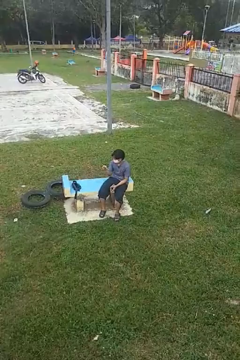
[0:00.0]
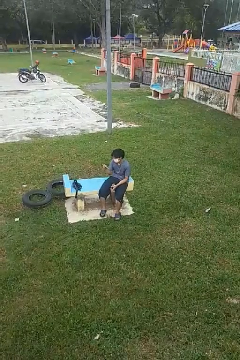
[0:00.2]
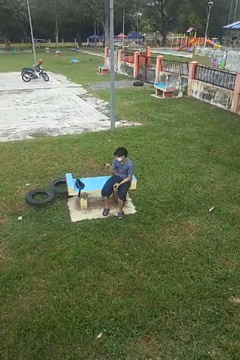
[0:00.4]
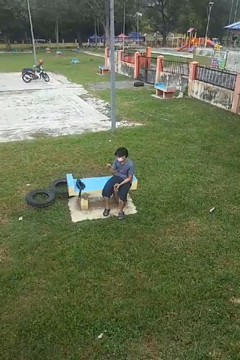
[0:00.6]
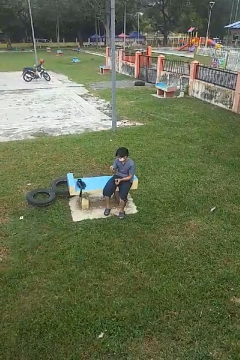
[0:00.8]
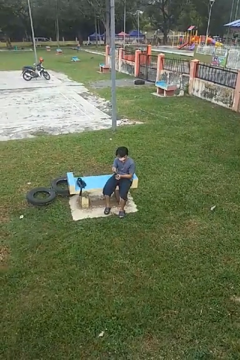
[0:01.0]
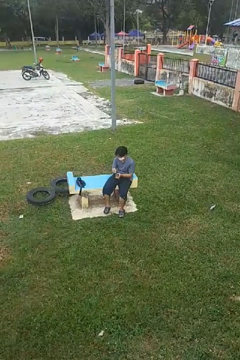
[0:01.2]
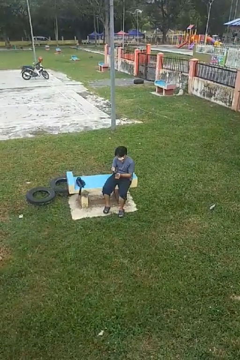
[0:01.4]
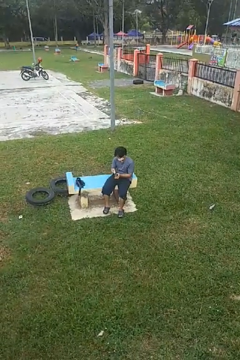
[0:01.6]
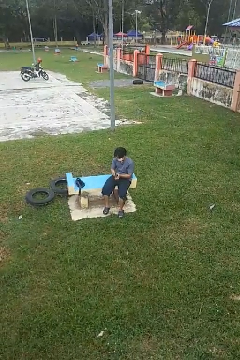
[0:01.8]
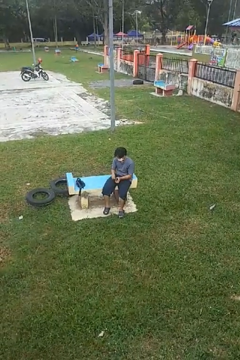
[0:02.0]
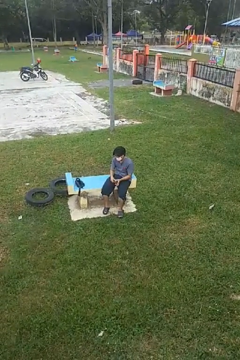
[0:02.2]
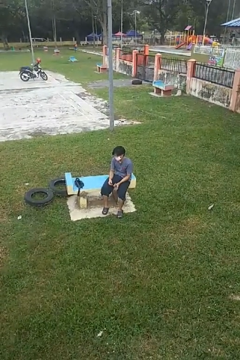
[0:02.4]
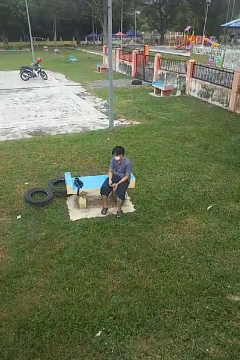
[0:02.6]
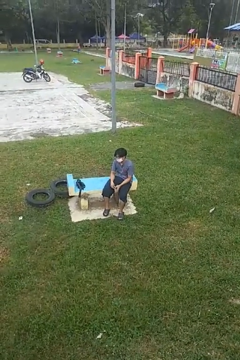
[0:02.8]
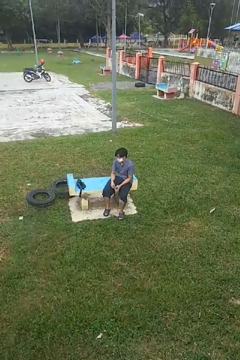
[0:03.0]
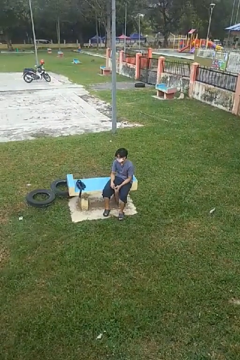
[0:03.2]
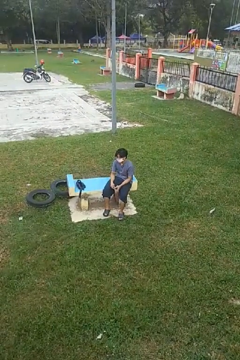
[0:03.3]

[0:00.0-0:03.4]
person puts object into purse

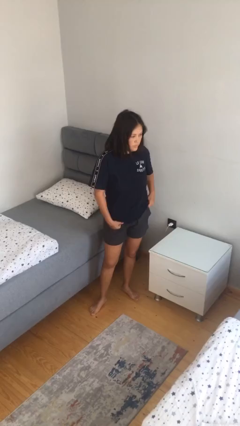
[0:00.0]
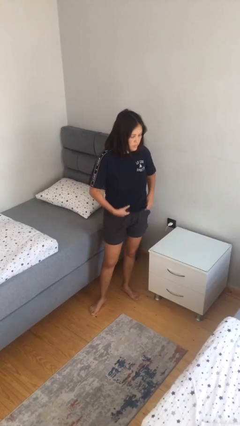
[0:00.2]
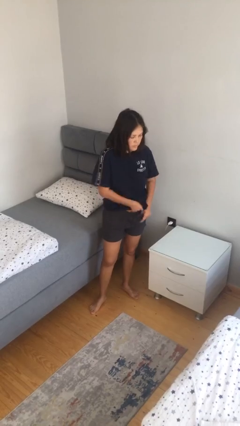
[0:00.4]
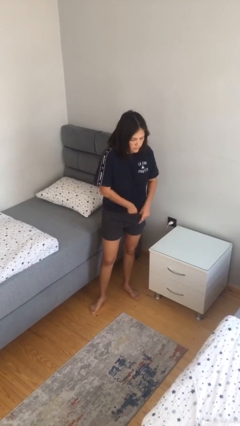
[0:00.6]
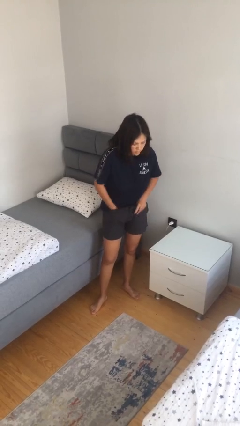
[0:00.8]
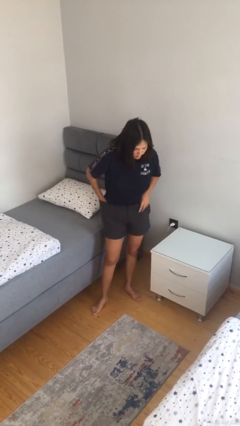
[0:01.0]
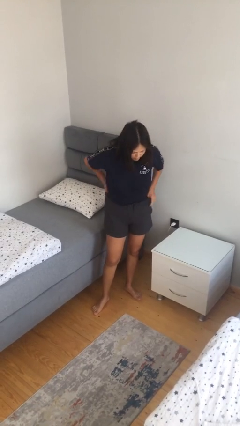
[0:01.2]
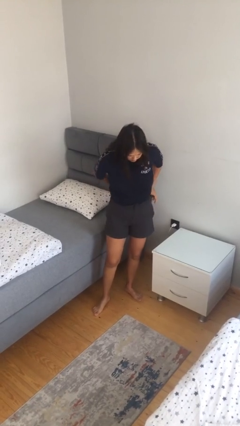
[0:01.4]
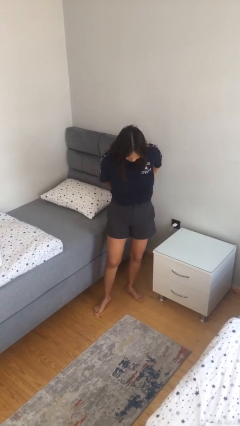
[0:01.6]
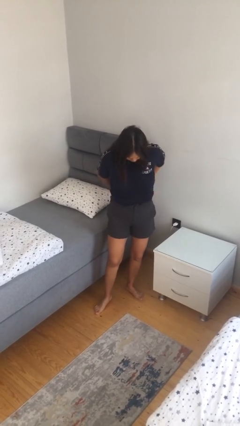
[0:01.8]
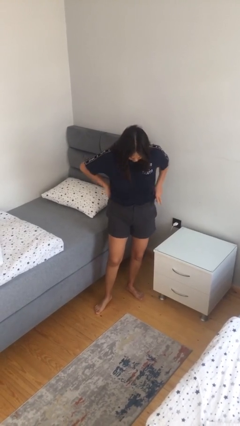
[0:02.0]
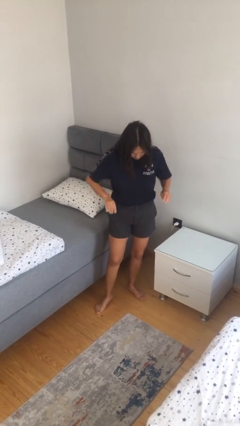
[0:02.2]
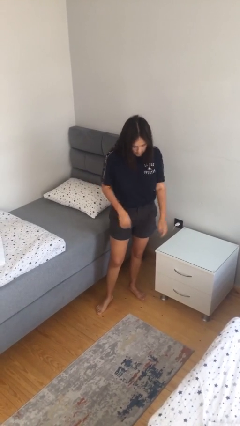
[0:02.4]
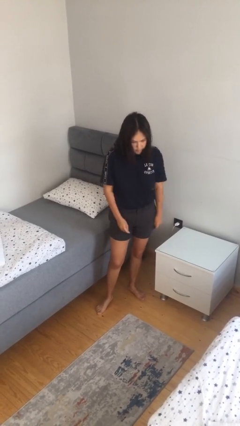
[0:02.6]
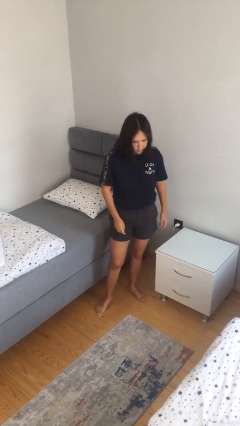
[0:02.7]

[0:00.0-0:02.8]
person tucks in shirt

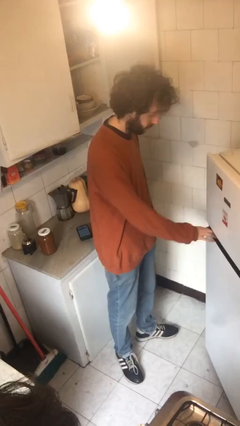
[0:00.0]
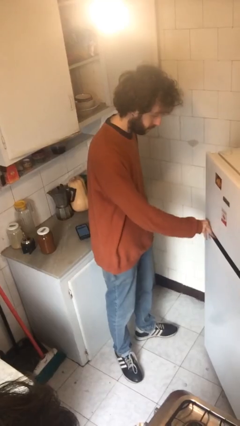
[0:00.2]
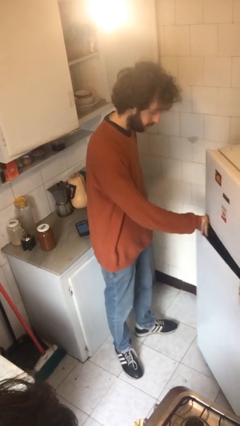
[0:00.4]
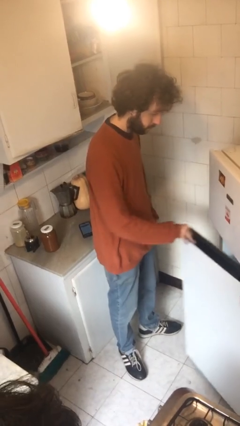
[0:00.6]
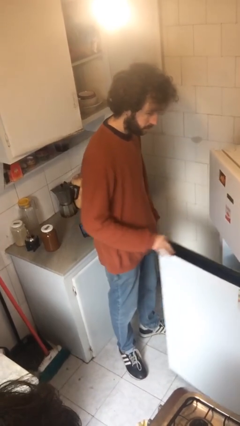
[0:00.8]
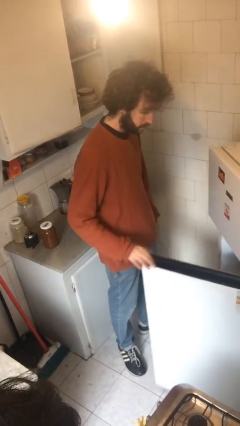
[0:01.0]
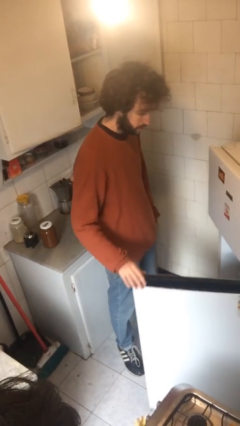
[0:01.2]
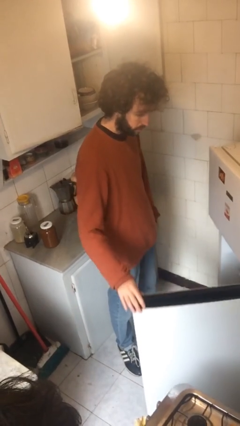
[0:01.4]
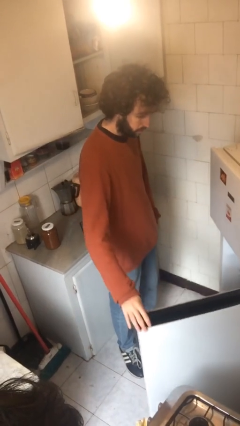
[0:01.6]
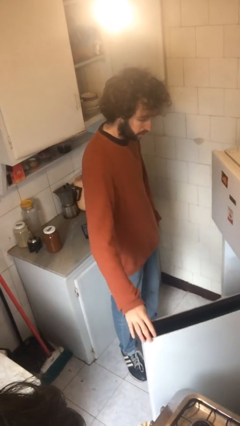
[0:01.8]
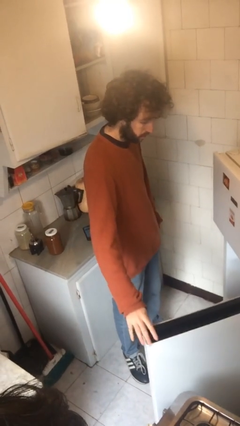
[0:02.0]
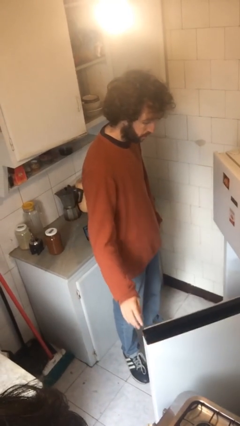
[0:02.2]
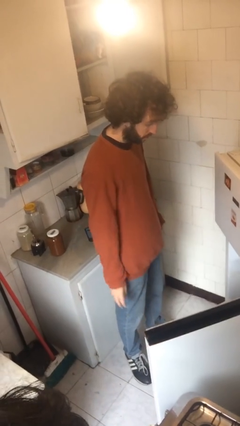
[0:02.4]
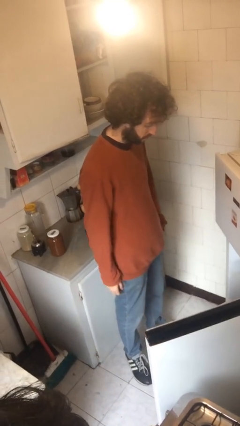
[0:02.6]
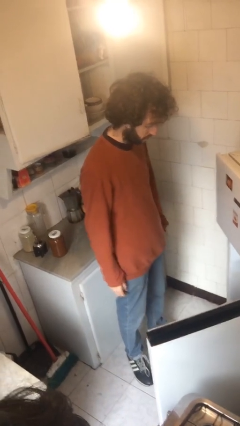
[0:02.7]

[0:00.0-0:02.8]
person opens refrigerator

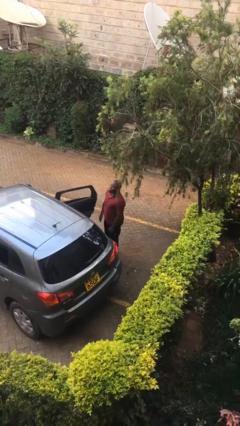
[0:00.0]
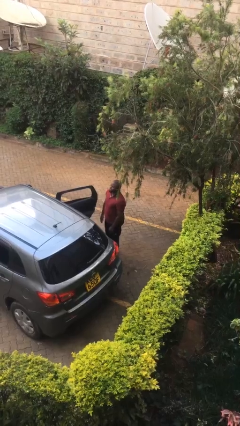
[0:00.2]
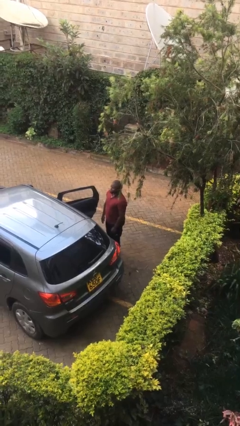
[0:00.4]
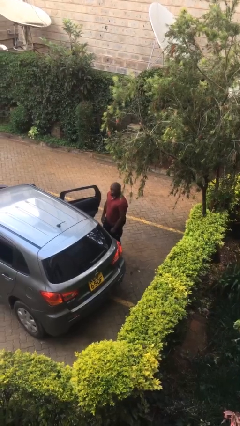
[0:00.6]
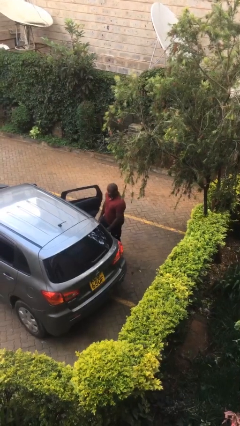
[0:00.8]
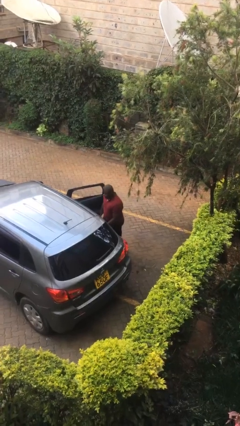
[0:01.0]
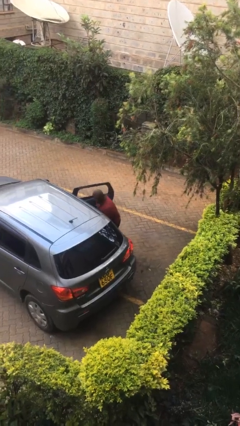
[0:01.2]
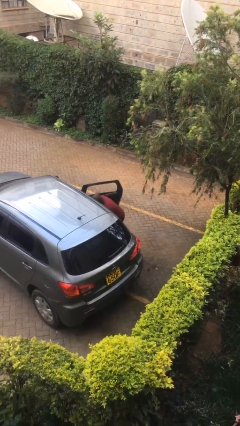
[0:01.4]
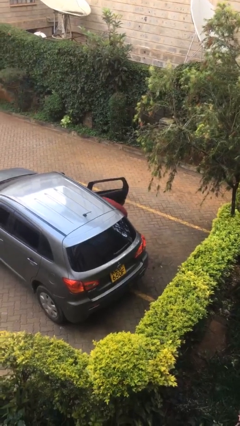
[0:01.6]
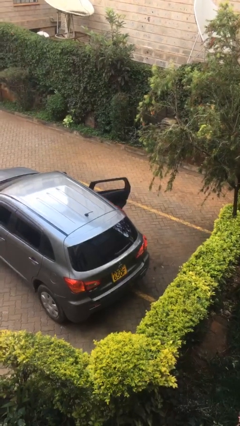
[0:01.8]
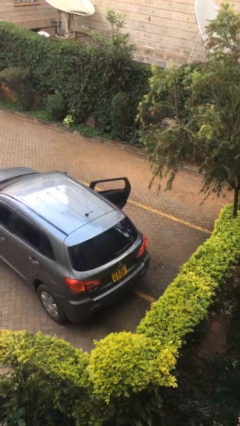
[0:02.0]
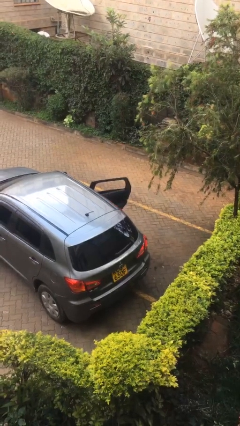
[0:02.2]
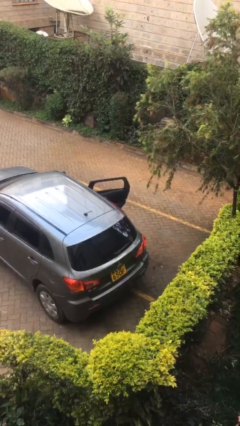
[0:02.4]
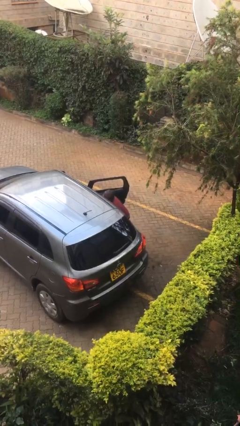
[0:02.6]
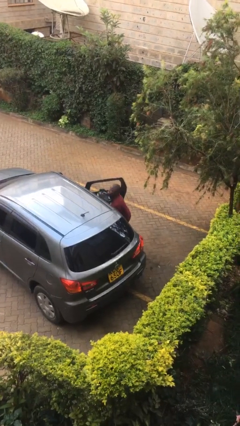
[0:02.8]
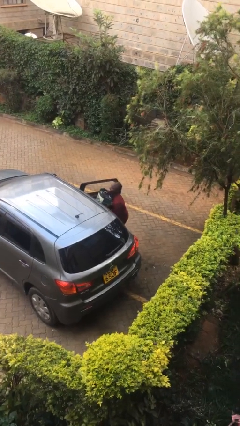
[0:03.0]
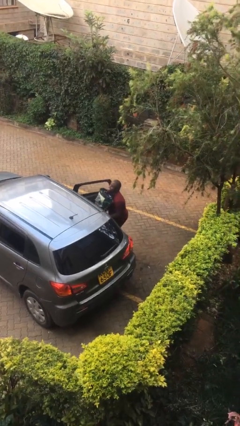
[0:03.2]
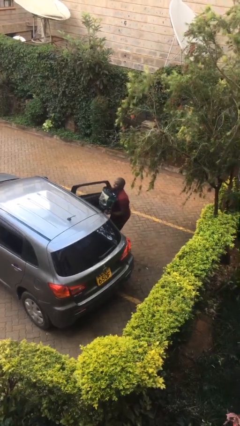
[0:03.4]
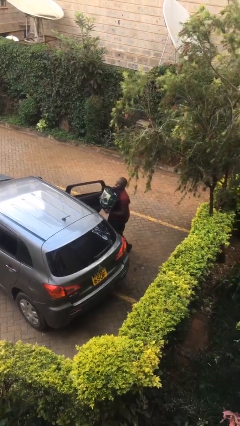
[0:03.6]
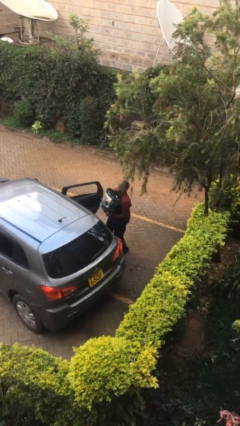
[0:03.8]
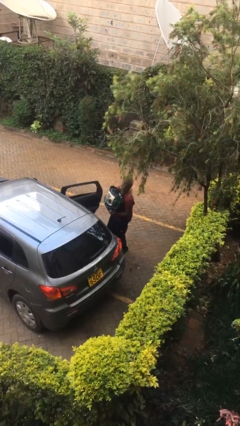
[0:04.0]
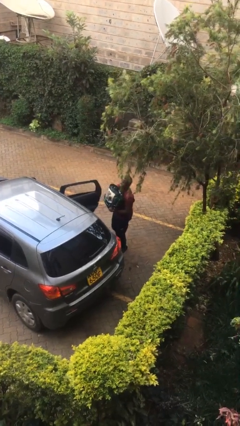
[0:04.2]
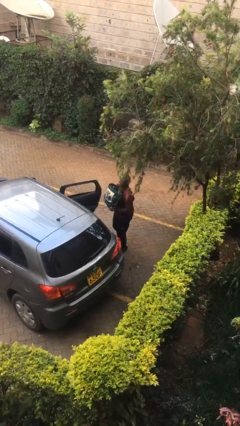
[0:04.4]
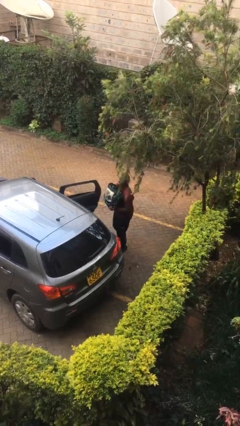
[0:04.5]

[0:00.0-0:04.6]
person unloads car

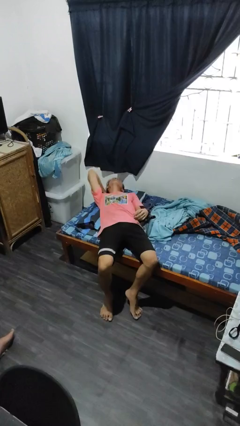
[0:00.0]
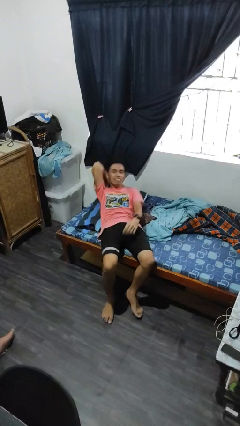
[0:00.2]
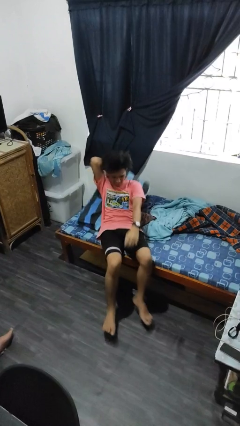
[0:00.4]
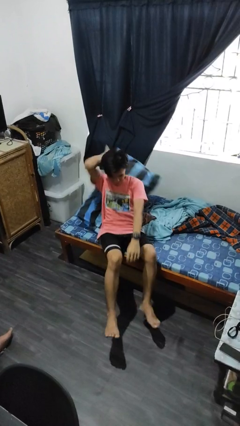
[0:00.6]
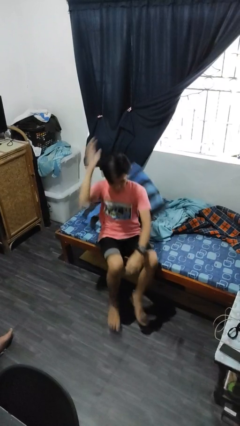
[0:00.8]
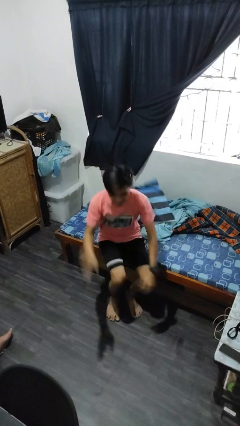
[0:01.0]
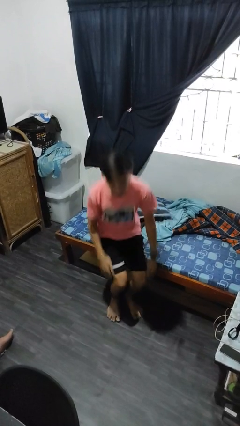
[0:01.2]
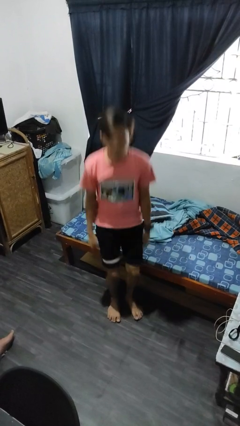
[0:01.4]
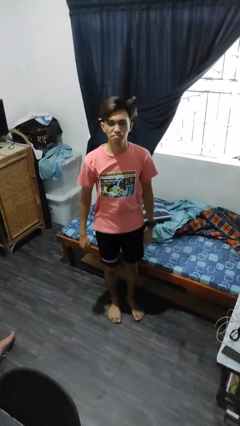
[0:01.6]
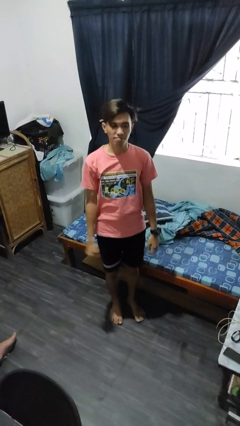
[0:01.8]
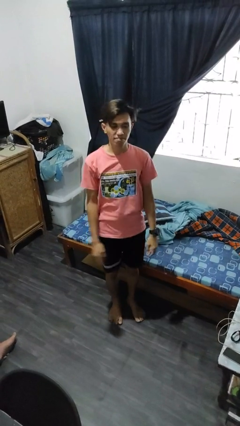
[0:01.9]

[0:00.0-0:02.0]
person stands up

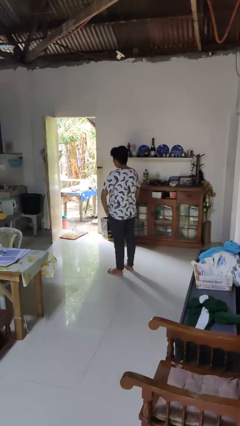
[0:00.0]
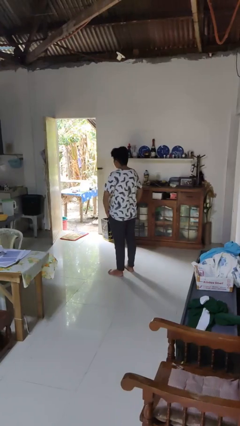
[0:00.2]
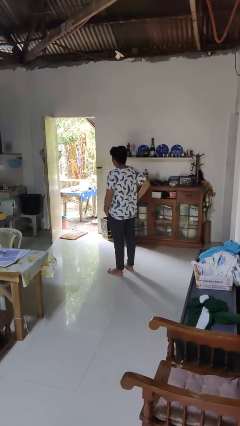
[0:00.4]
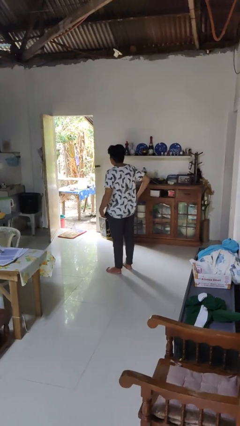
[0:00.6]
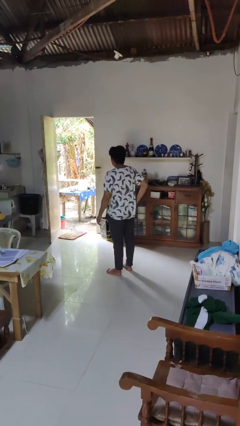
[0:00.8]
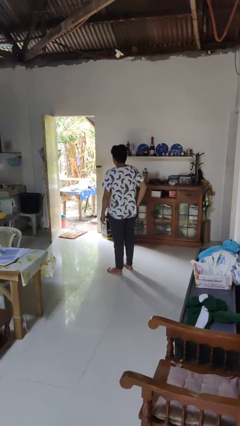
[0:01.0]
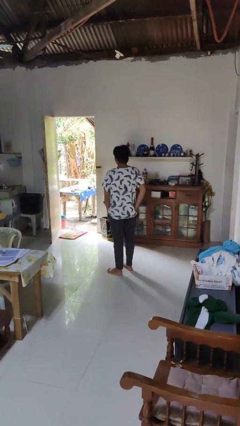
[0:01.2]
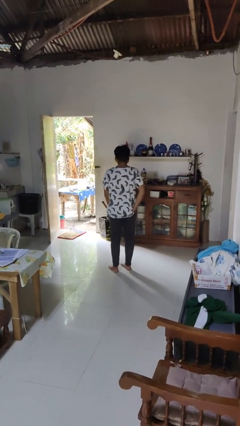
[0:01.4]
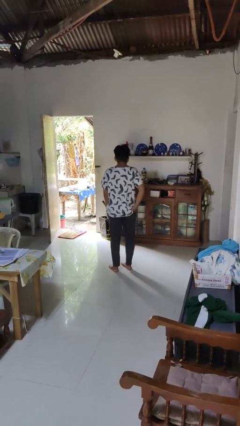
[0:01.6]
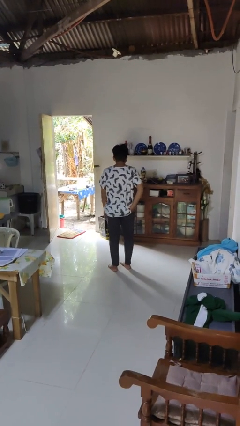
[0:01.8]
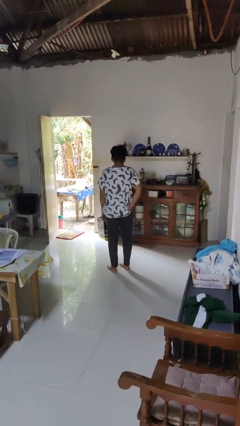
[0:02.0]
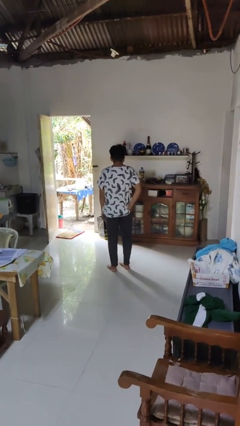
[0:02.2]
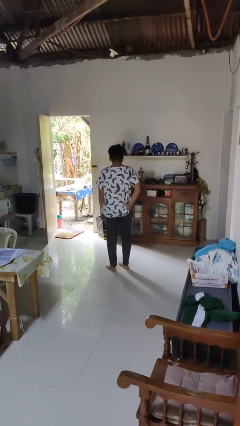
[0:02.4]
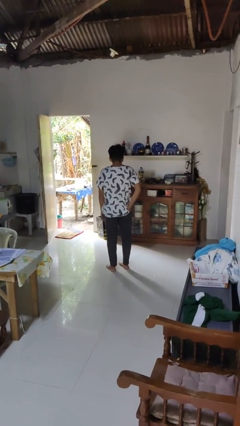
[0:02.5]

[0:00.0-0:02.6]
person puts hands in back pockets
